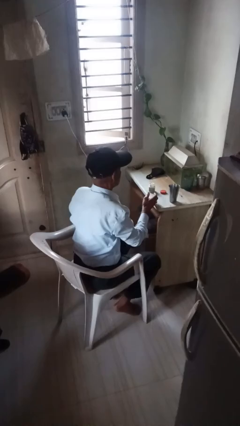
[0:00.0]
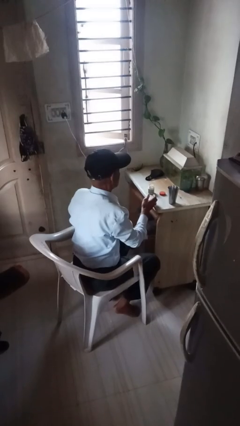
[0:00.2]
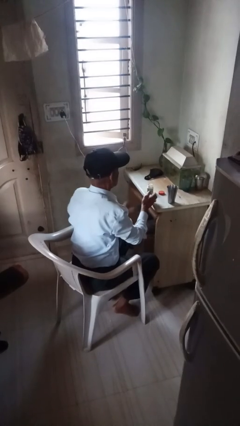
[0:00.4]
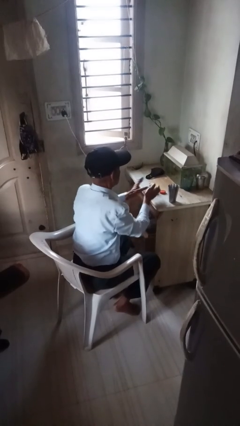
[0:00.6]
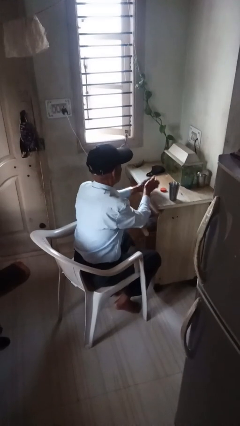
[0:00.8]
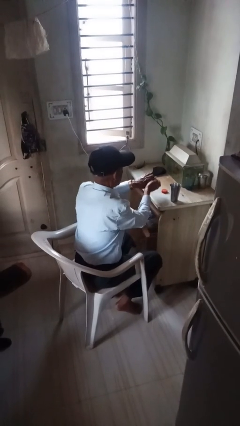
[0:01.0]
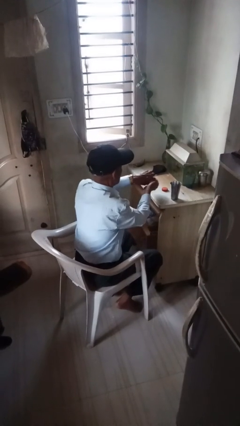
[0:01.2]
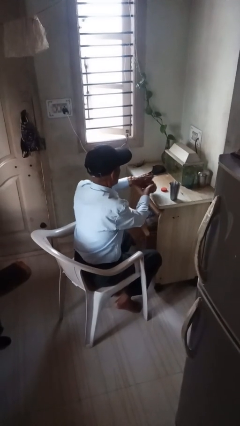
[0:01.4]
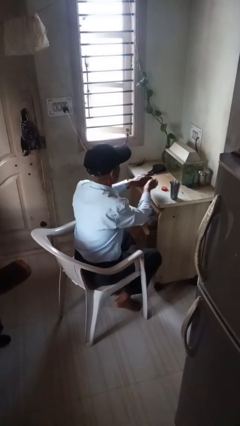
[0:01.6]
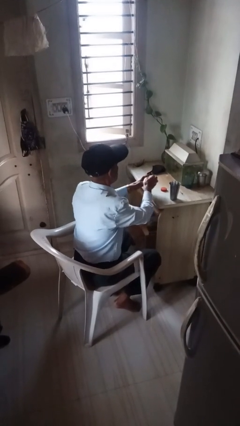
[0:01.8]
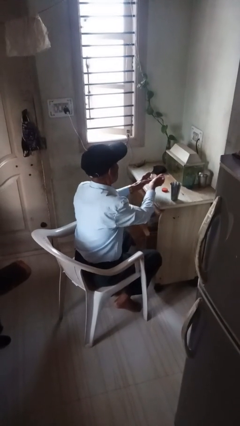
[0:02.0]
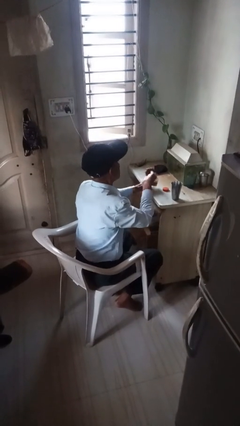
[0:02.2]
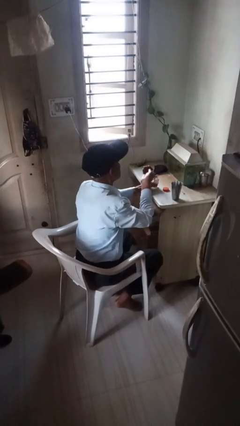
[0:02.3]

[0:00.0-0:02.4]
person takes medicine pills

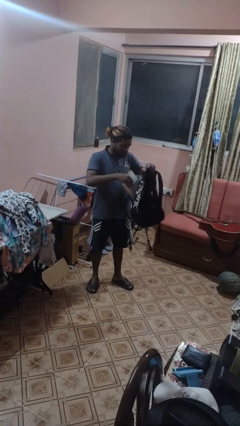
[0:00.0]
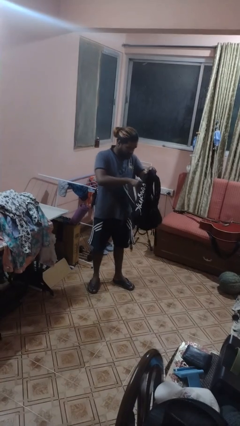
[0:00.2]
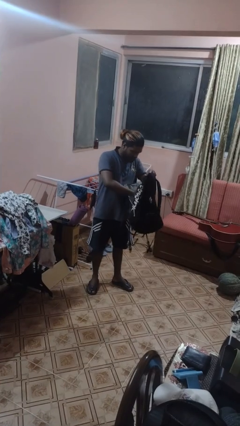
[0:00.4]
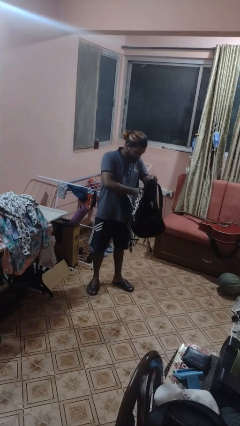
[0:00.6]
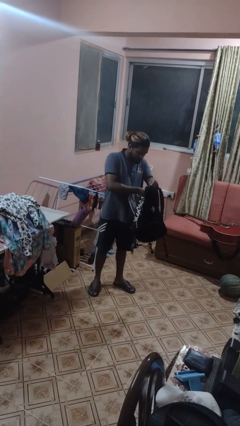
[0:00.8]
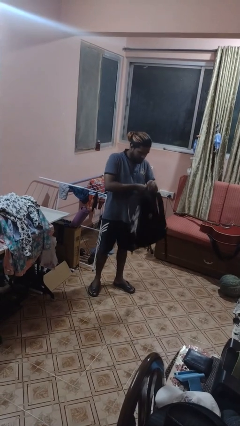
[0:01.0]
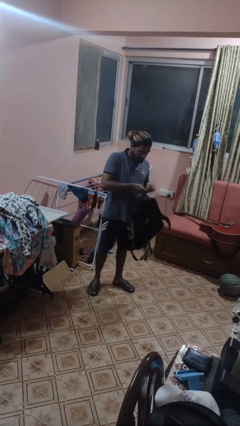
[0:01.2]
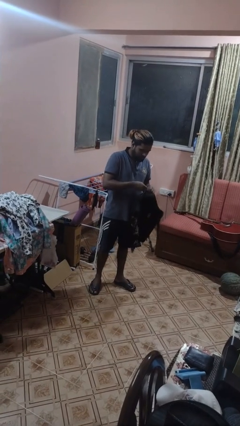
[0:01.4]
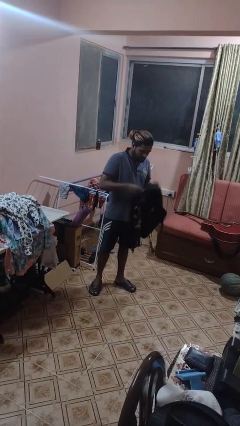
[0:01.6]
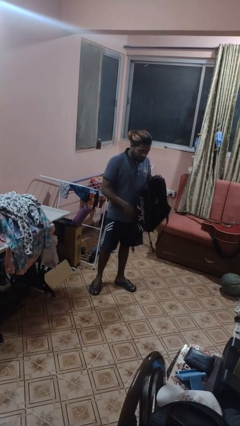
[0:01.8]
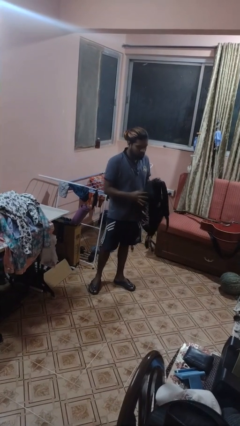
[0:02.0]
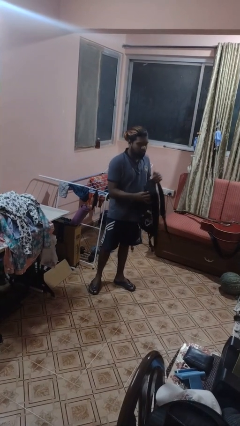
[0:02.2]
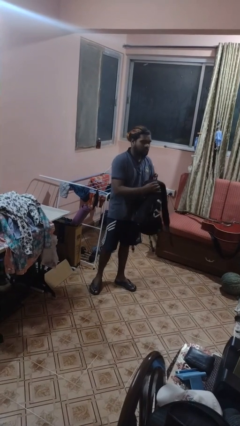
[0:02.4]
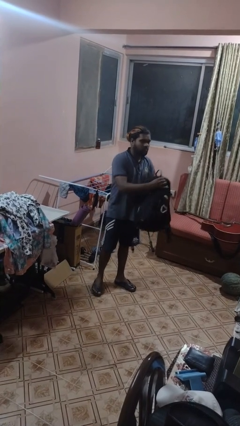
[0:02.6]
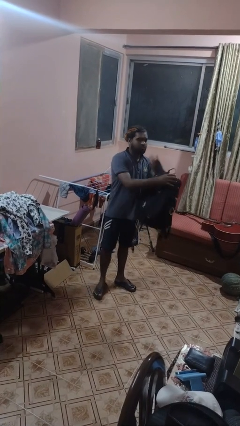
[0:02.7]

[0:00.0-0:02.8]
person puts object into backpack

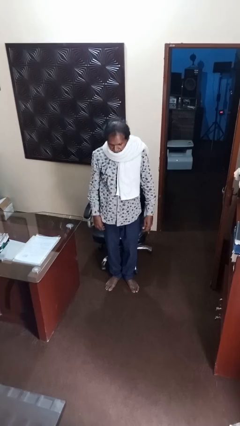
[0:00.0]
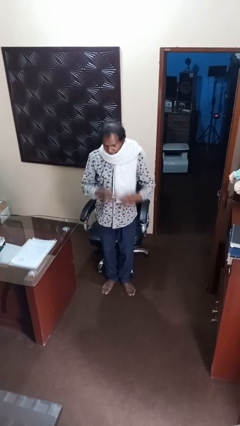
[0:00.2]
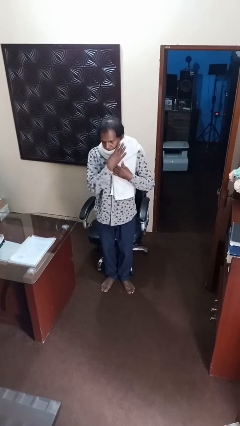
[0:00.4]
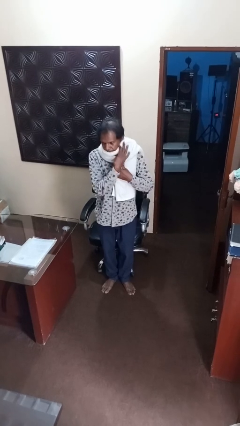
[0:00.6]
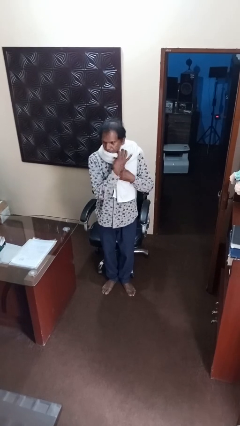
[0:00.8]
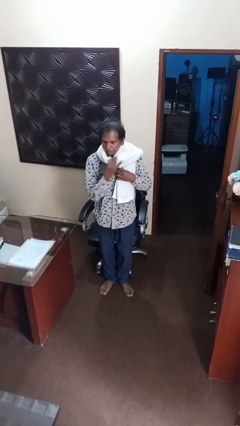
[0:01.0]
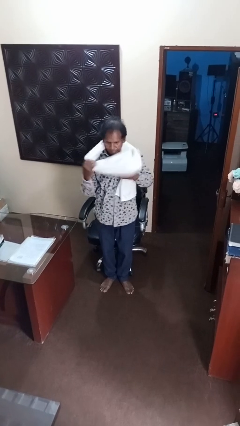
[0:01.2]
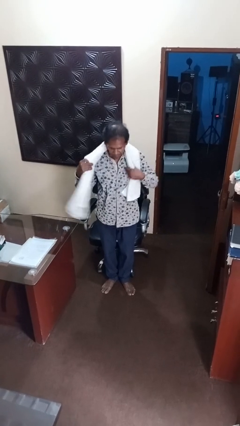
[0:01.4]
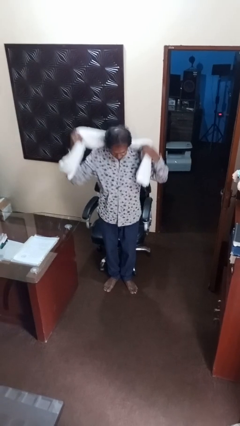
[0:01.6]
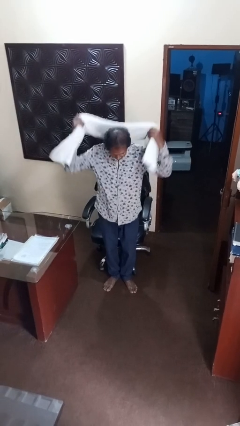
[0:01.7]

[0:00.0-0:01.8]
person takes off scarf

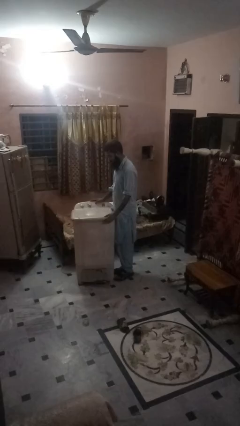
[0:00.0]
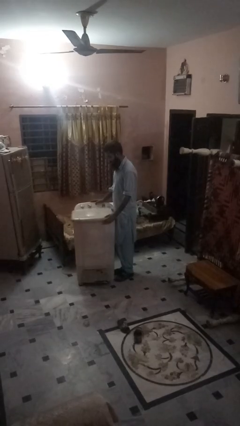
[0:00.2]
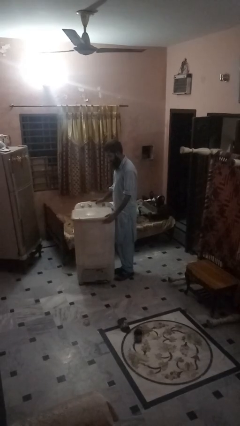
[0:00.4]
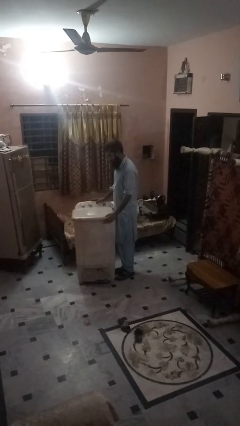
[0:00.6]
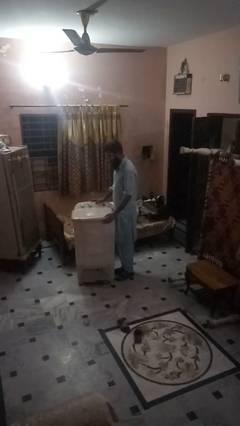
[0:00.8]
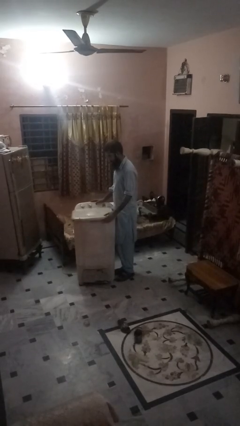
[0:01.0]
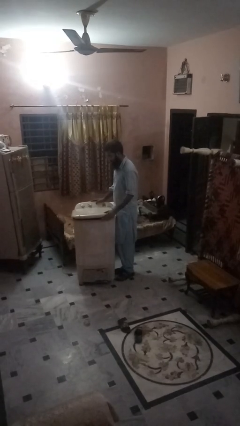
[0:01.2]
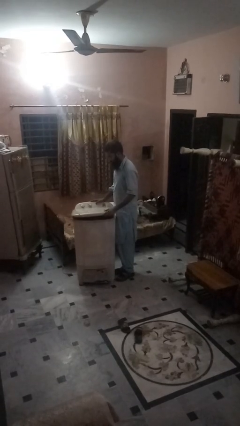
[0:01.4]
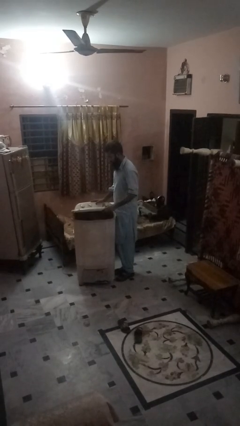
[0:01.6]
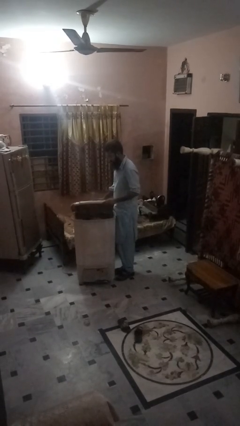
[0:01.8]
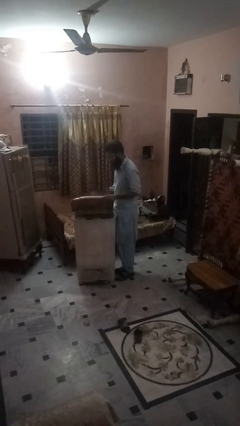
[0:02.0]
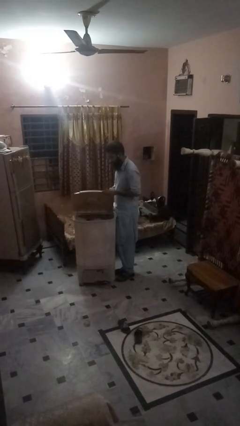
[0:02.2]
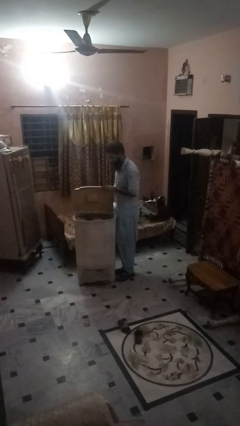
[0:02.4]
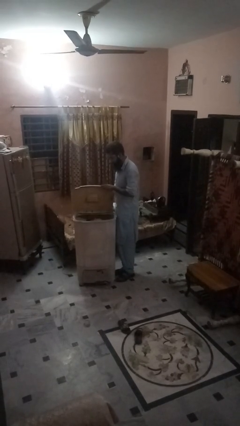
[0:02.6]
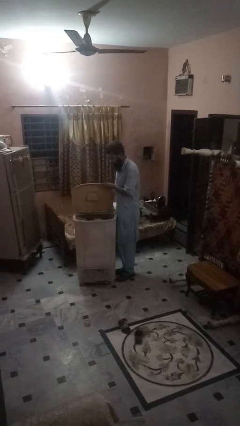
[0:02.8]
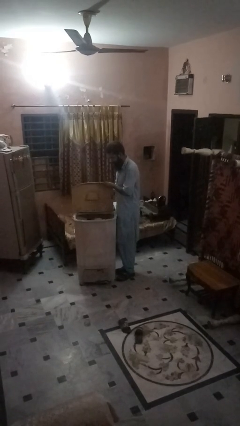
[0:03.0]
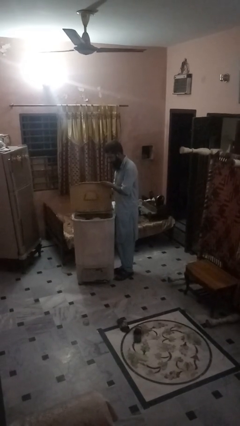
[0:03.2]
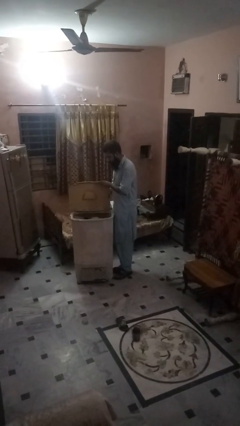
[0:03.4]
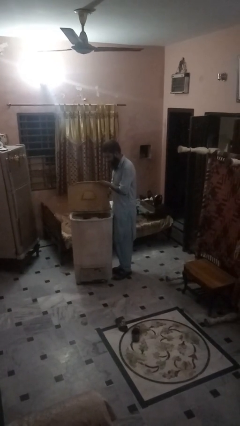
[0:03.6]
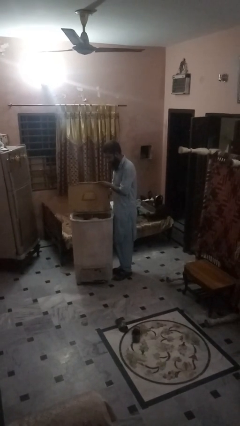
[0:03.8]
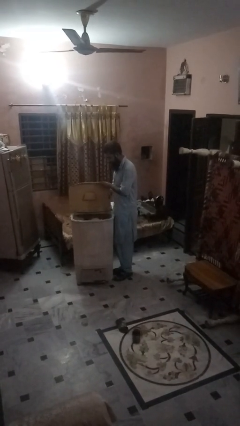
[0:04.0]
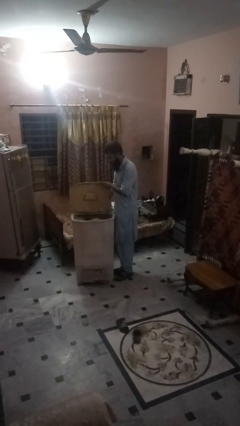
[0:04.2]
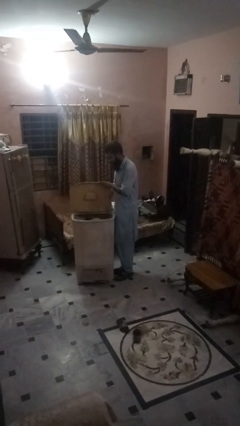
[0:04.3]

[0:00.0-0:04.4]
person opens clothes washer

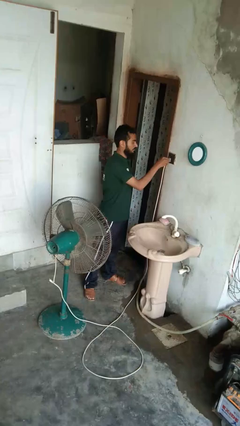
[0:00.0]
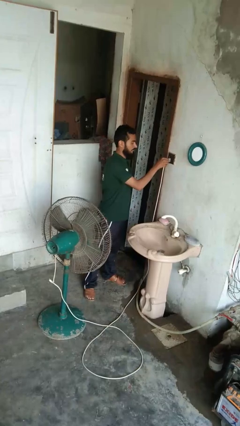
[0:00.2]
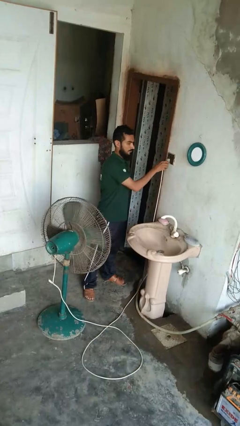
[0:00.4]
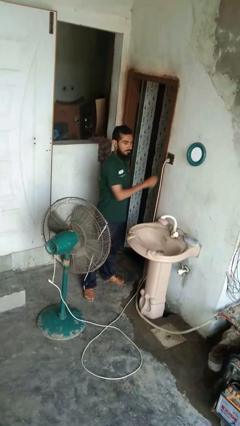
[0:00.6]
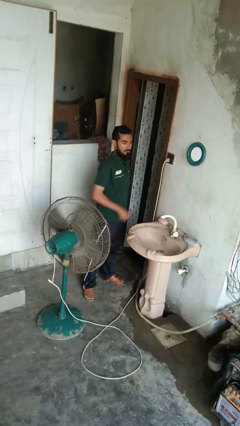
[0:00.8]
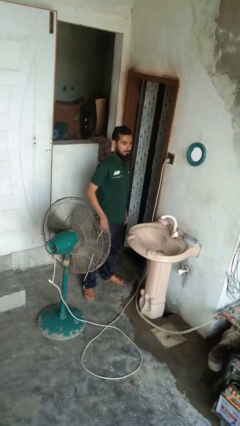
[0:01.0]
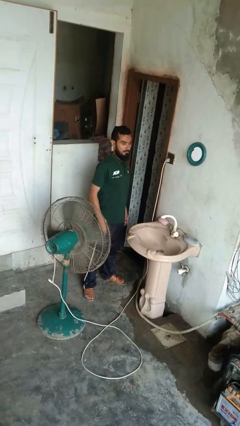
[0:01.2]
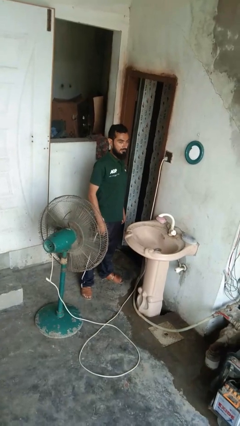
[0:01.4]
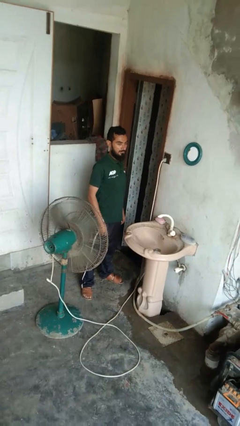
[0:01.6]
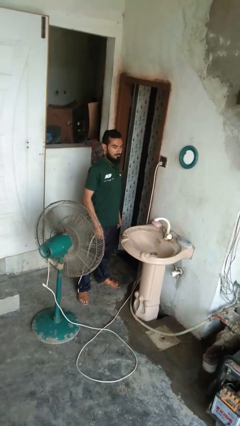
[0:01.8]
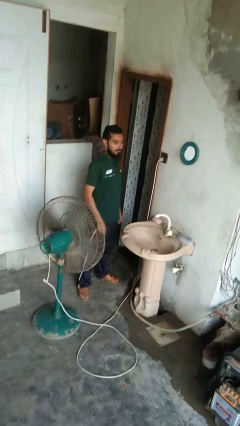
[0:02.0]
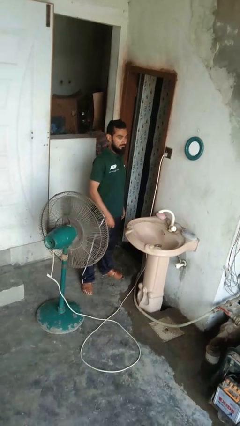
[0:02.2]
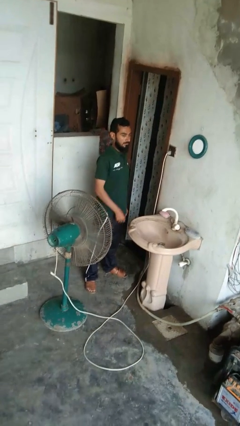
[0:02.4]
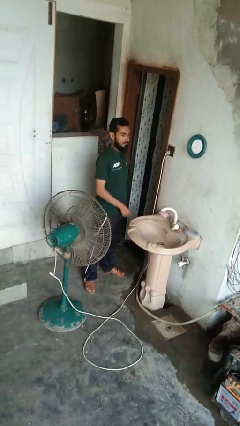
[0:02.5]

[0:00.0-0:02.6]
person turns on fan

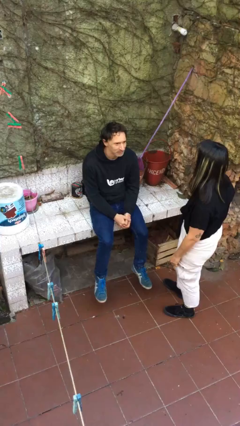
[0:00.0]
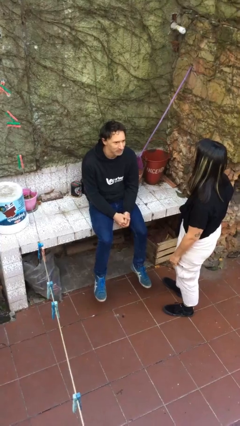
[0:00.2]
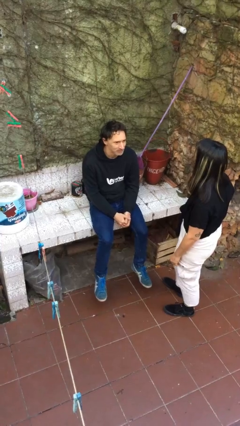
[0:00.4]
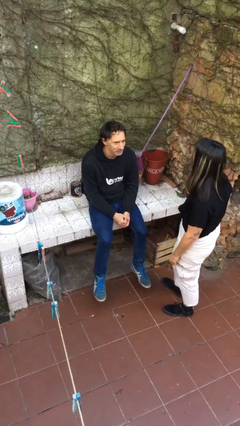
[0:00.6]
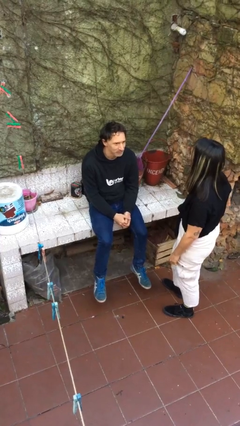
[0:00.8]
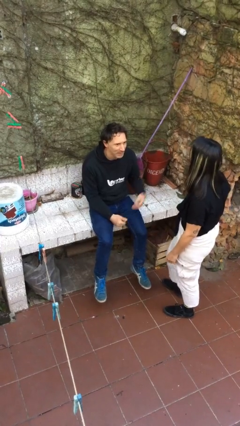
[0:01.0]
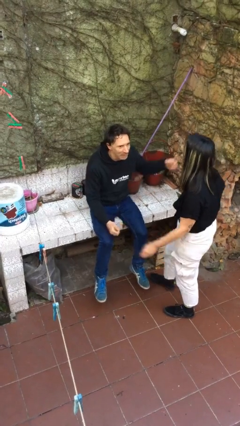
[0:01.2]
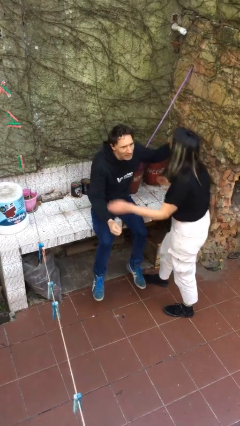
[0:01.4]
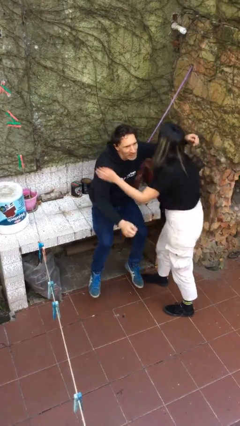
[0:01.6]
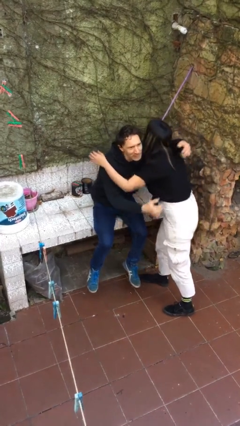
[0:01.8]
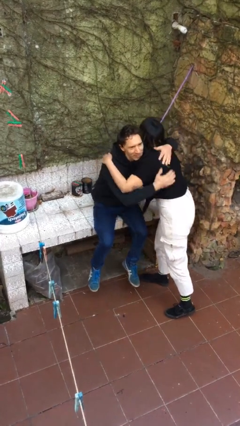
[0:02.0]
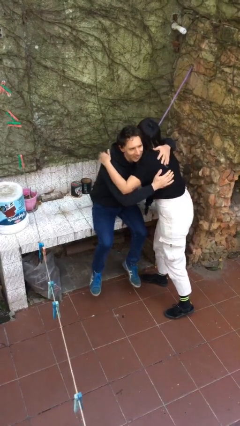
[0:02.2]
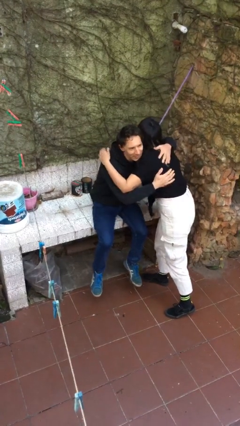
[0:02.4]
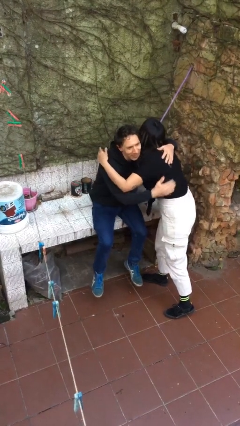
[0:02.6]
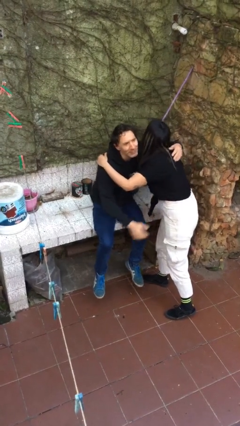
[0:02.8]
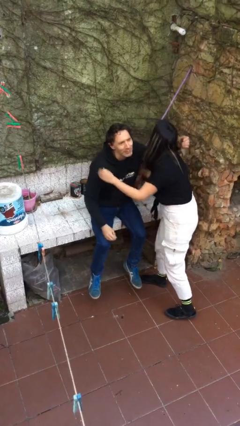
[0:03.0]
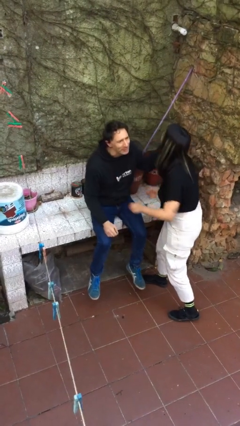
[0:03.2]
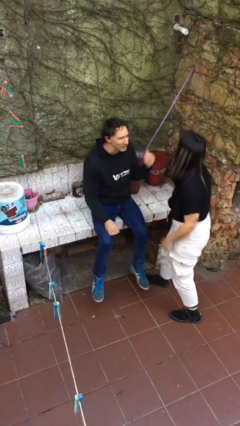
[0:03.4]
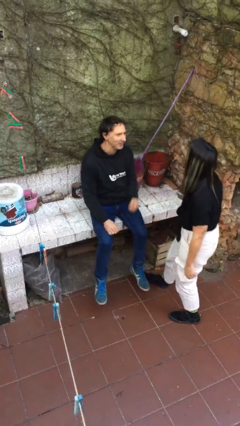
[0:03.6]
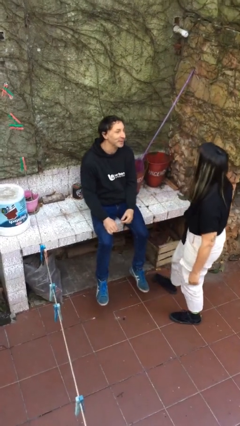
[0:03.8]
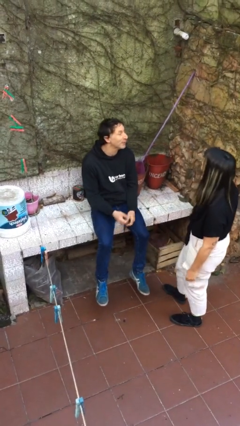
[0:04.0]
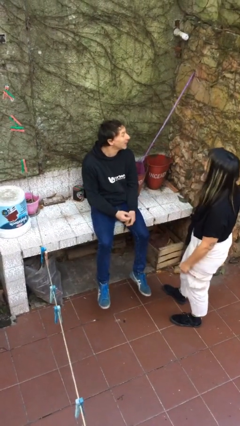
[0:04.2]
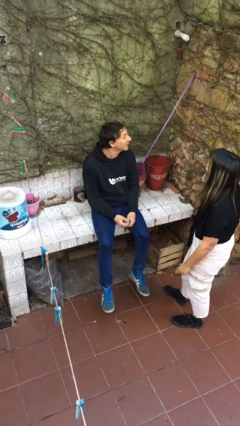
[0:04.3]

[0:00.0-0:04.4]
person embraces person
